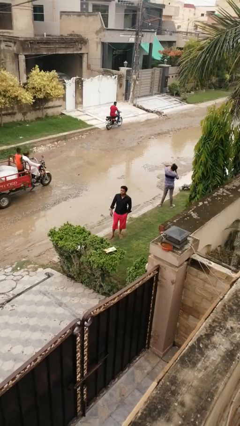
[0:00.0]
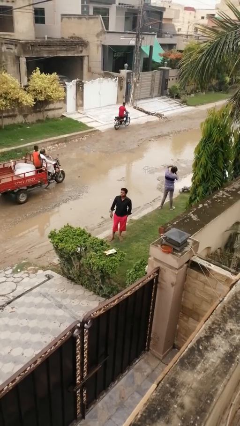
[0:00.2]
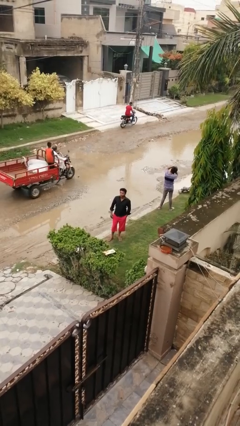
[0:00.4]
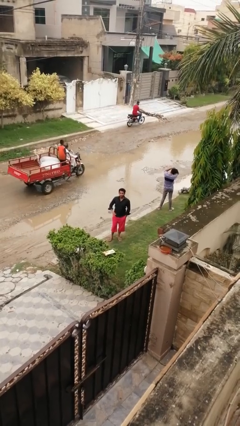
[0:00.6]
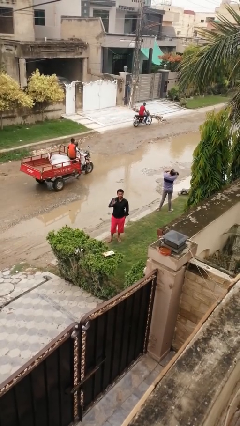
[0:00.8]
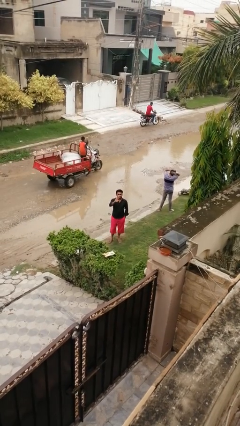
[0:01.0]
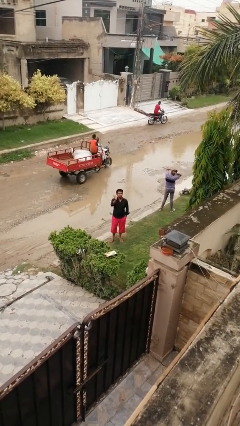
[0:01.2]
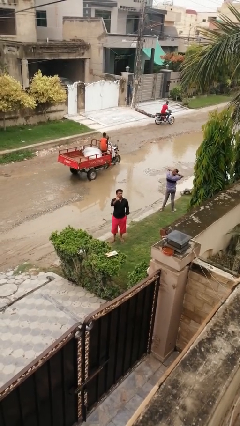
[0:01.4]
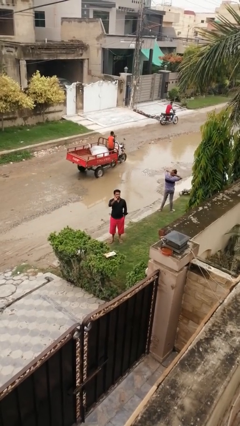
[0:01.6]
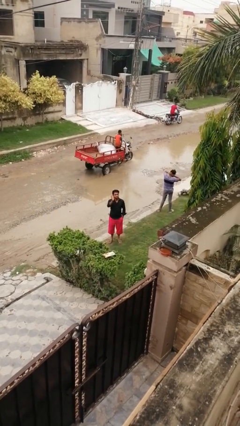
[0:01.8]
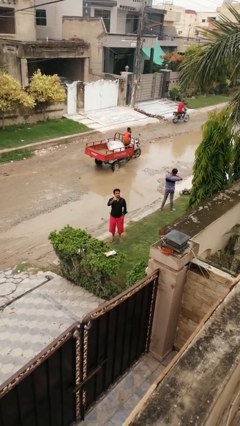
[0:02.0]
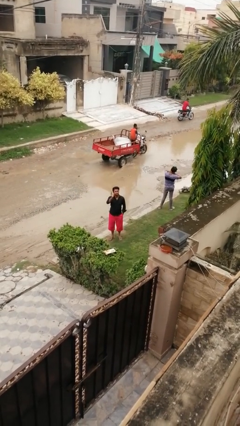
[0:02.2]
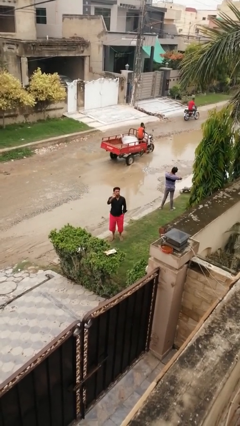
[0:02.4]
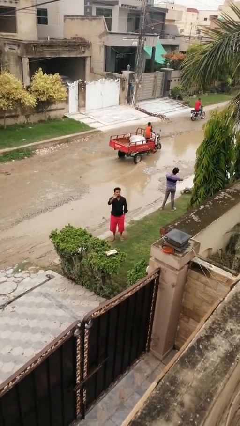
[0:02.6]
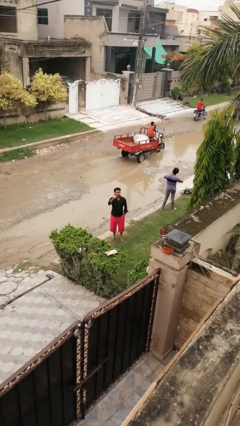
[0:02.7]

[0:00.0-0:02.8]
person waves at person

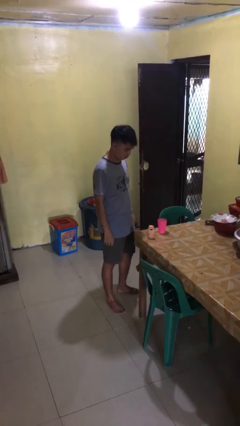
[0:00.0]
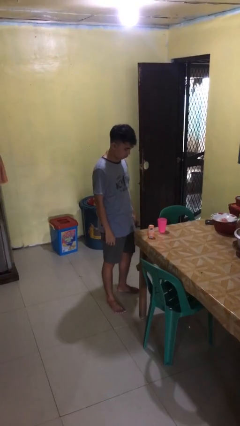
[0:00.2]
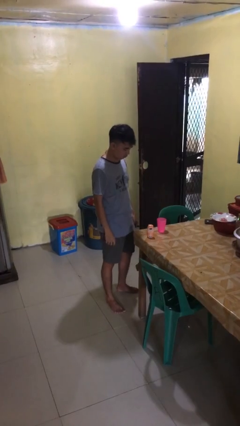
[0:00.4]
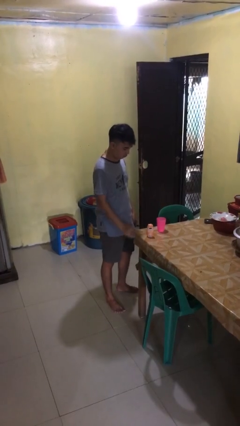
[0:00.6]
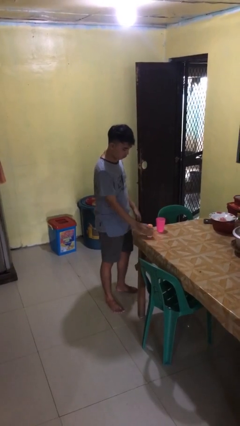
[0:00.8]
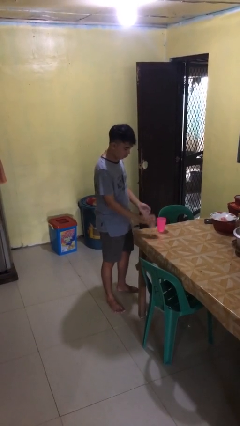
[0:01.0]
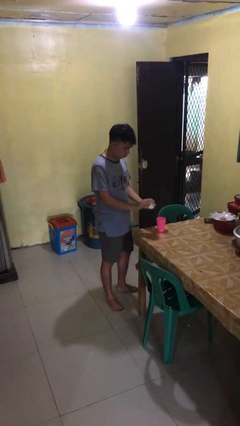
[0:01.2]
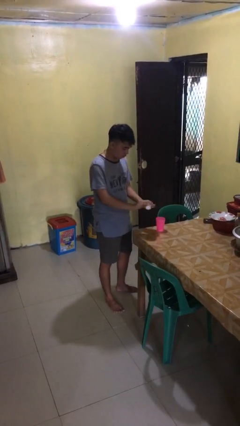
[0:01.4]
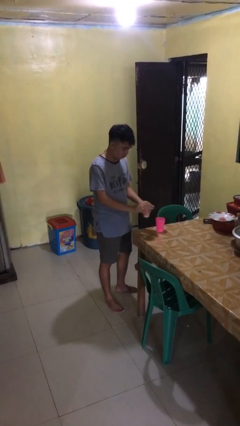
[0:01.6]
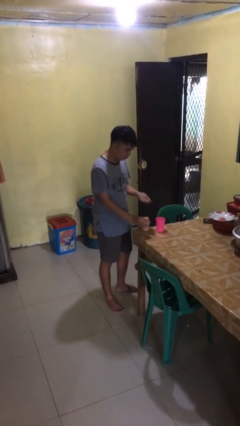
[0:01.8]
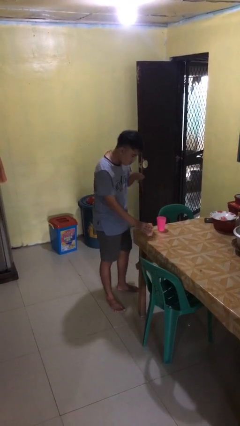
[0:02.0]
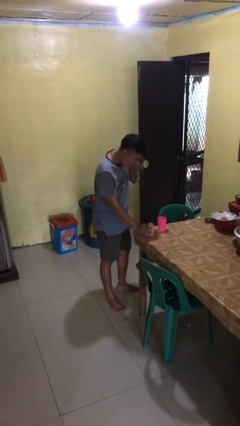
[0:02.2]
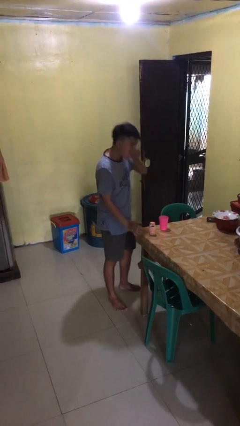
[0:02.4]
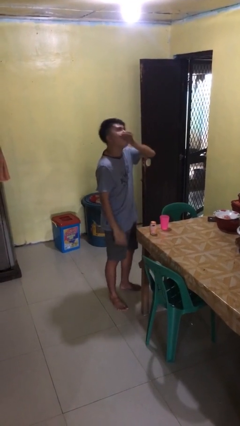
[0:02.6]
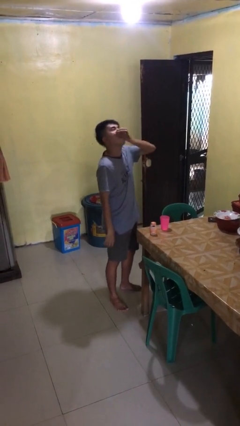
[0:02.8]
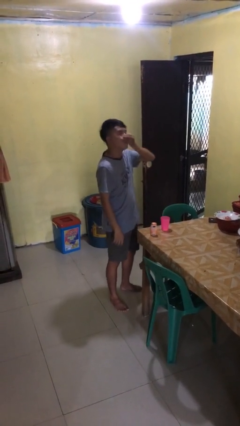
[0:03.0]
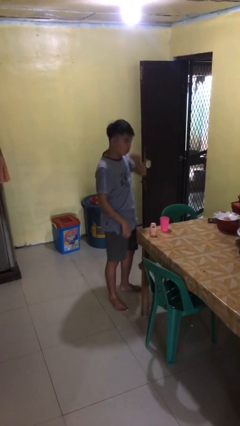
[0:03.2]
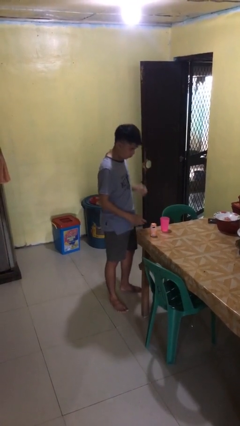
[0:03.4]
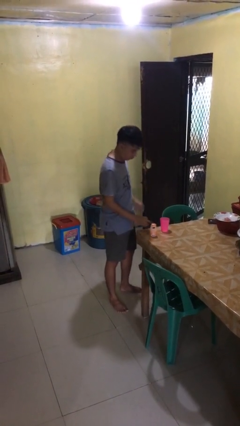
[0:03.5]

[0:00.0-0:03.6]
person takes medicine pills

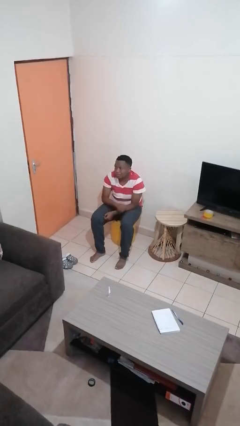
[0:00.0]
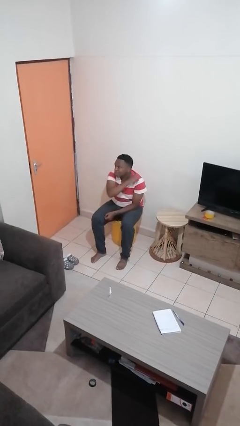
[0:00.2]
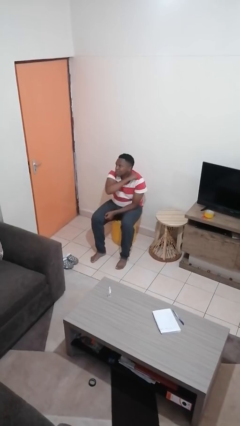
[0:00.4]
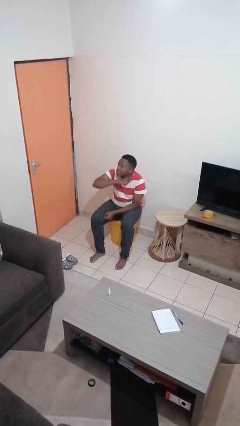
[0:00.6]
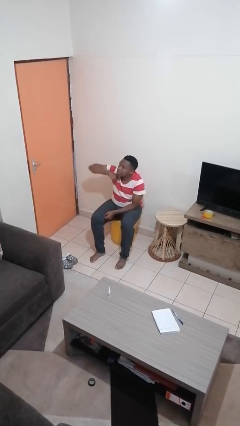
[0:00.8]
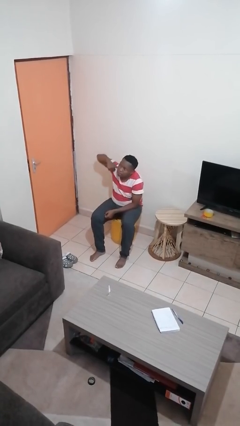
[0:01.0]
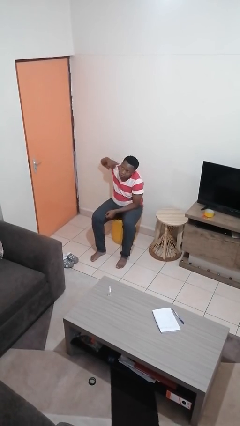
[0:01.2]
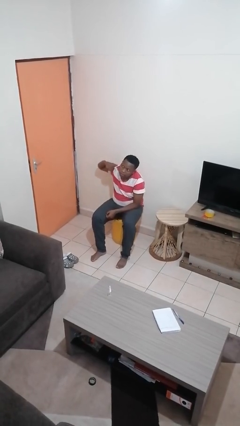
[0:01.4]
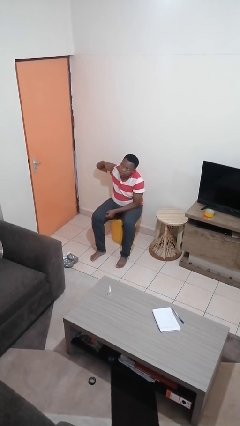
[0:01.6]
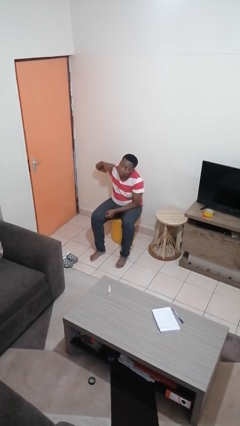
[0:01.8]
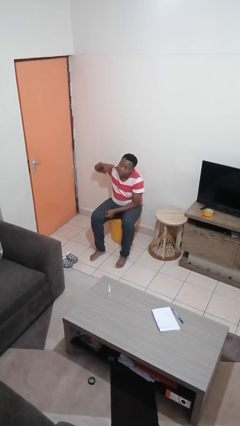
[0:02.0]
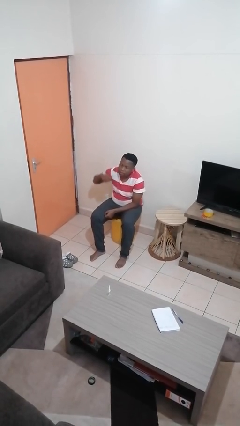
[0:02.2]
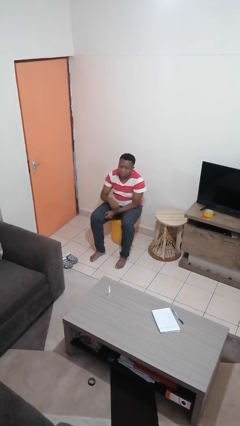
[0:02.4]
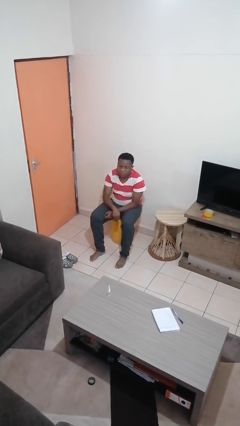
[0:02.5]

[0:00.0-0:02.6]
person gestures cut

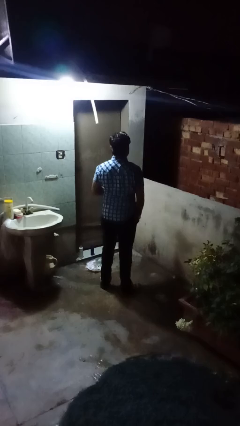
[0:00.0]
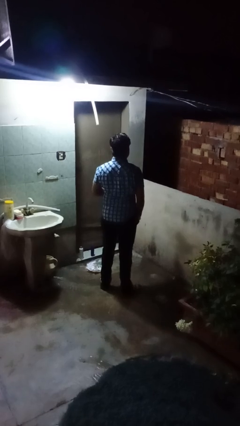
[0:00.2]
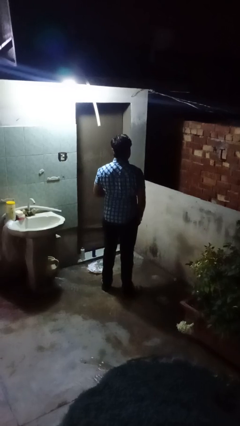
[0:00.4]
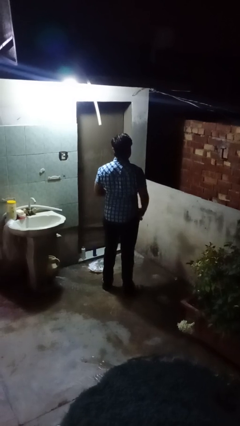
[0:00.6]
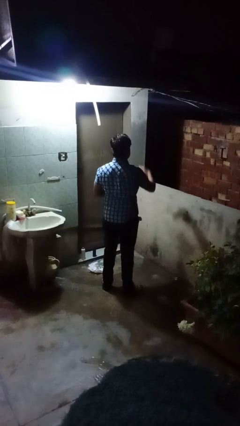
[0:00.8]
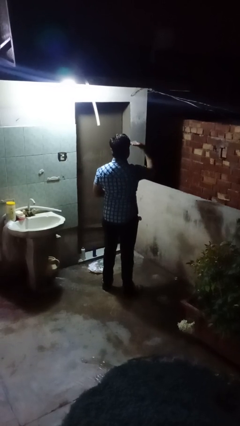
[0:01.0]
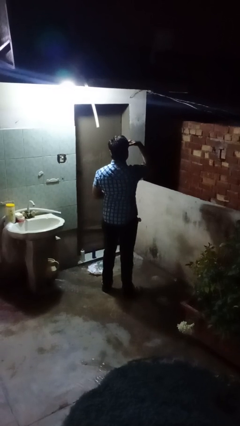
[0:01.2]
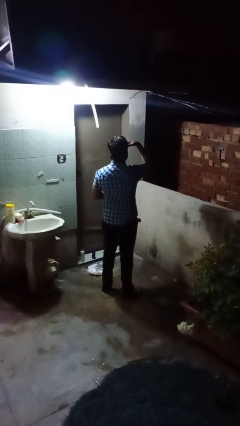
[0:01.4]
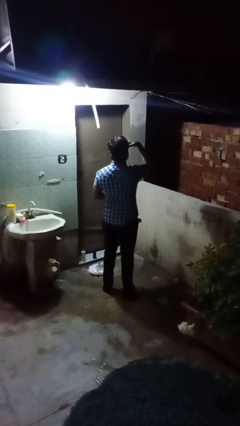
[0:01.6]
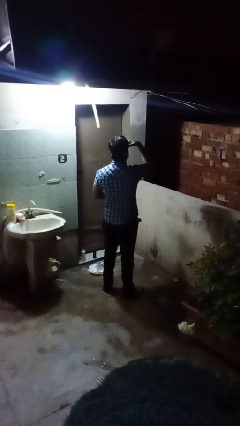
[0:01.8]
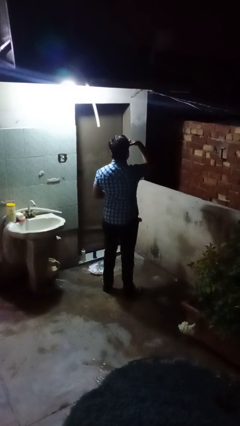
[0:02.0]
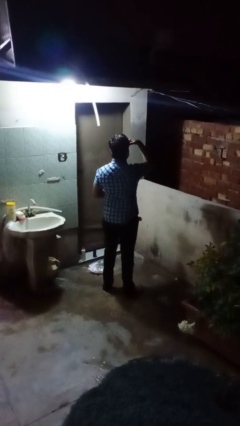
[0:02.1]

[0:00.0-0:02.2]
person shades eyes

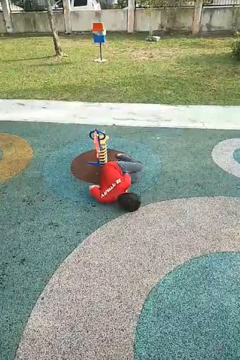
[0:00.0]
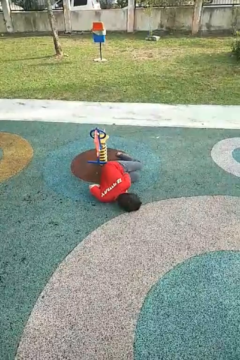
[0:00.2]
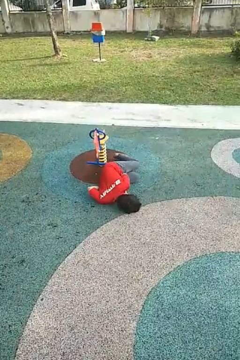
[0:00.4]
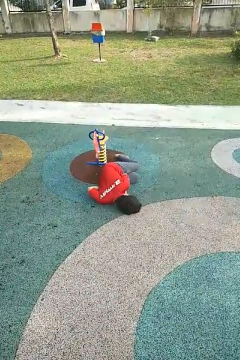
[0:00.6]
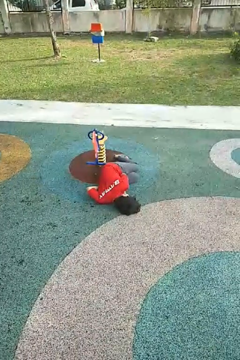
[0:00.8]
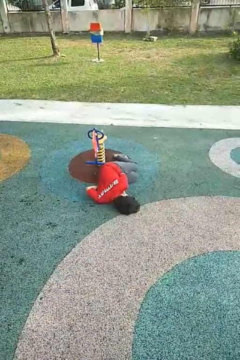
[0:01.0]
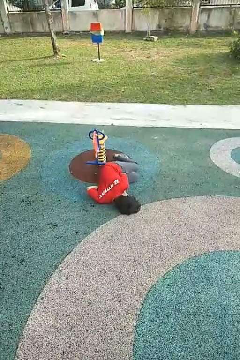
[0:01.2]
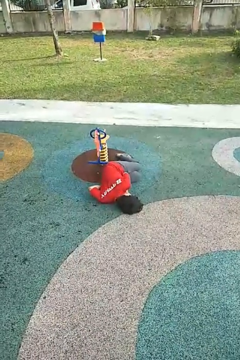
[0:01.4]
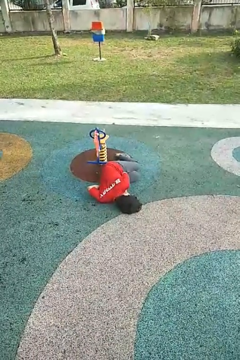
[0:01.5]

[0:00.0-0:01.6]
person lies down on floor

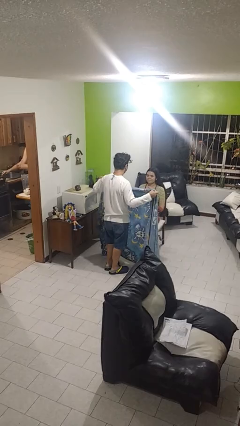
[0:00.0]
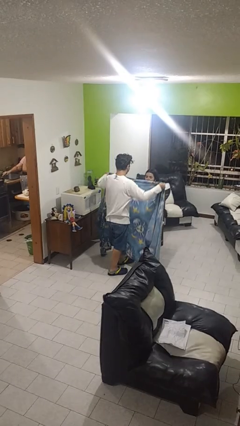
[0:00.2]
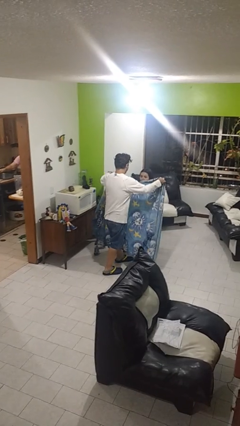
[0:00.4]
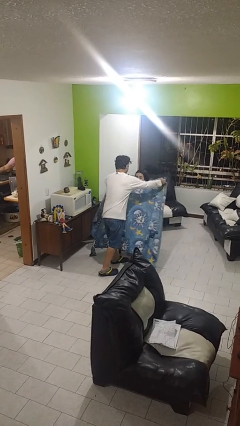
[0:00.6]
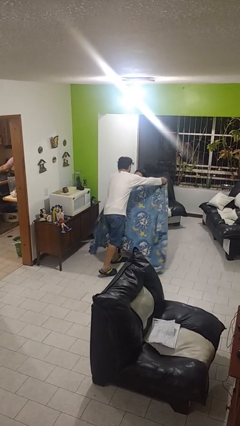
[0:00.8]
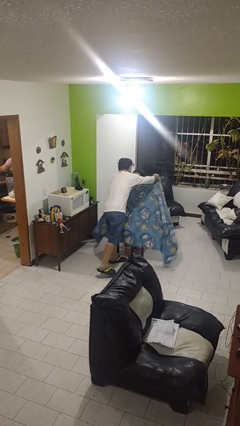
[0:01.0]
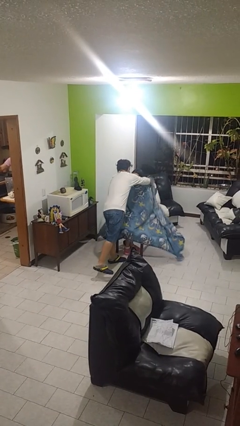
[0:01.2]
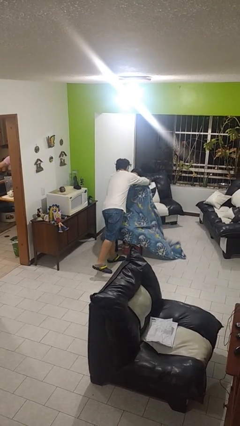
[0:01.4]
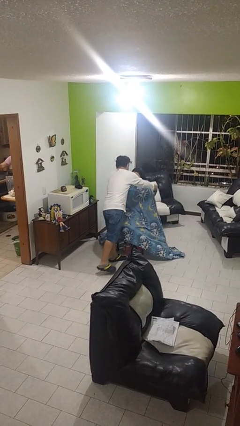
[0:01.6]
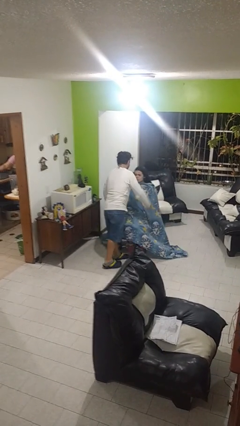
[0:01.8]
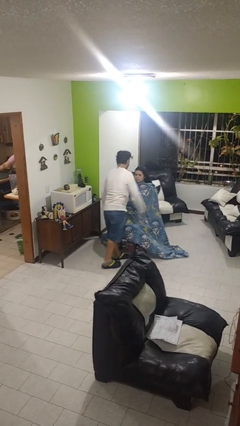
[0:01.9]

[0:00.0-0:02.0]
person covers friend with blanket

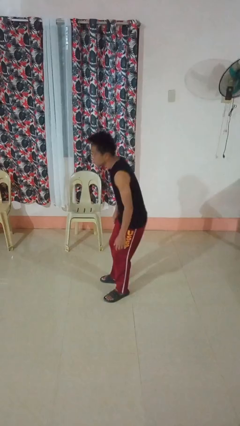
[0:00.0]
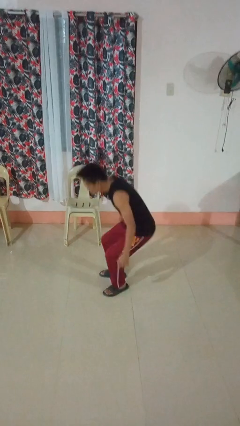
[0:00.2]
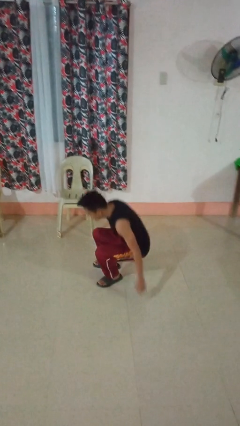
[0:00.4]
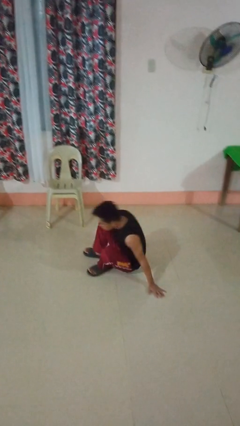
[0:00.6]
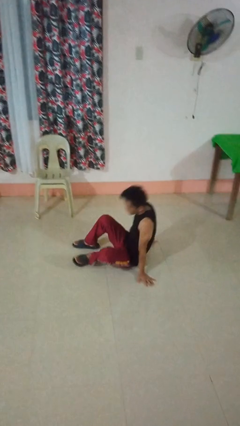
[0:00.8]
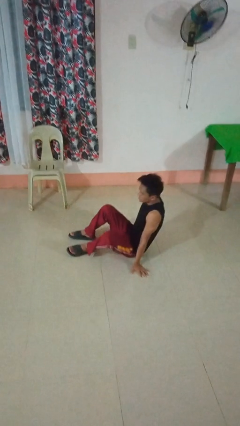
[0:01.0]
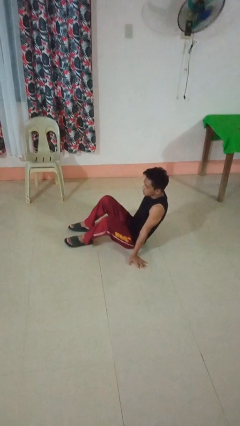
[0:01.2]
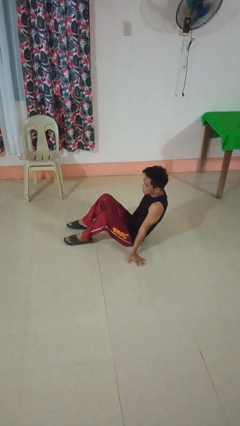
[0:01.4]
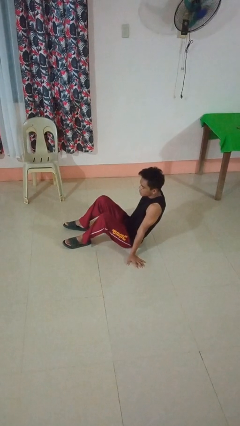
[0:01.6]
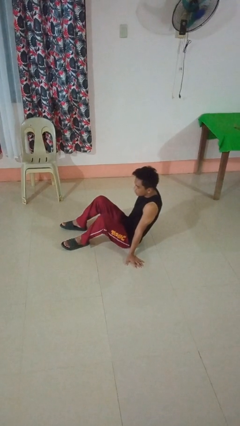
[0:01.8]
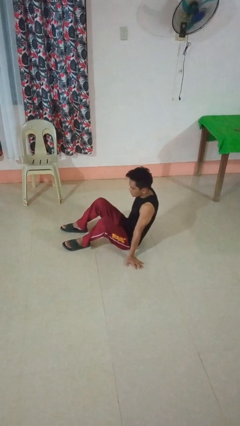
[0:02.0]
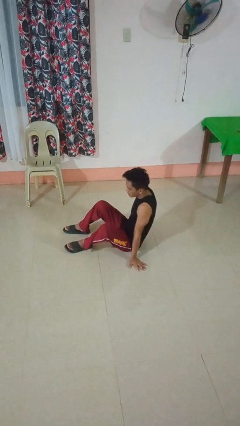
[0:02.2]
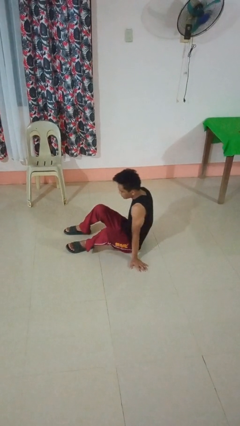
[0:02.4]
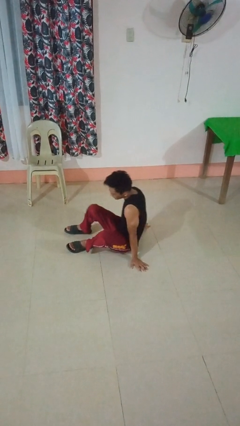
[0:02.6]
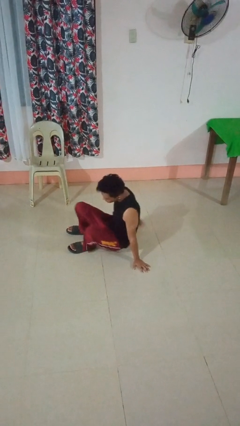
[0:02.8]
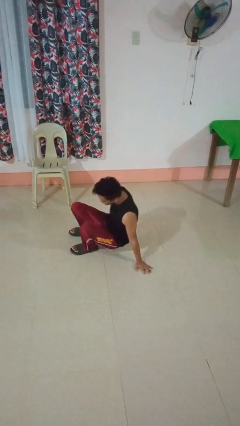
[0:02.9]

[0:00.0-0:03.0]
person falls while standing
